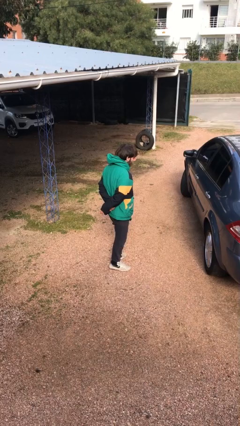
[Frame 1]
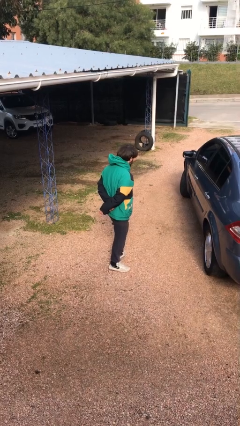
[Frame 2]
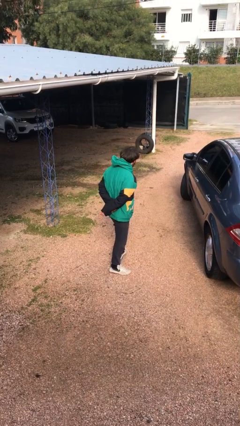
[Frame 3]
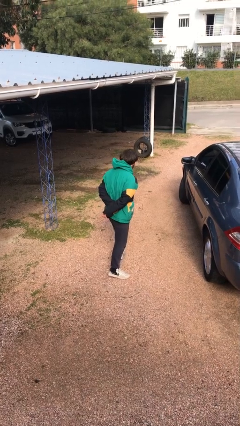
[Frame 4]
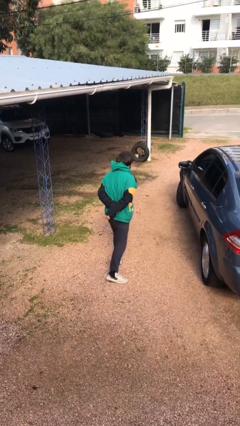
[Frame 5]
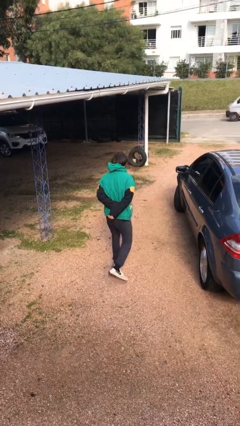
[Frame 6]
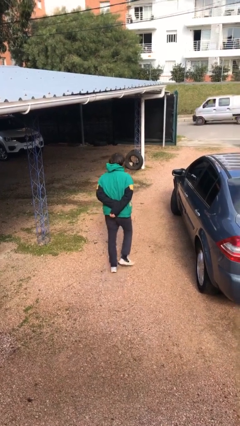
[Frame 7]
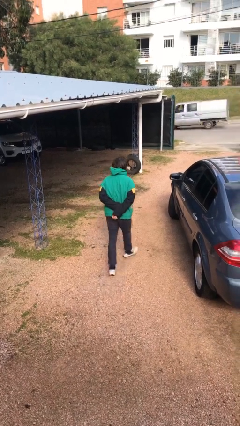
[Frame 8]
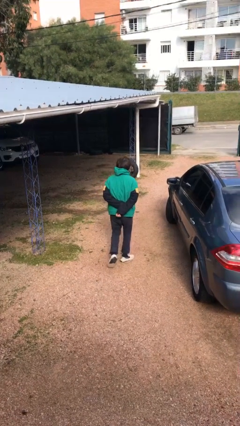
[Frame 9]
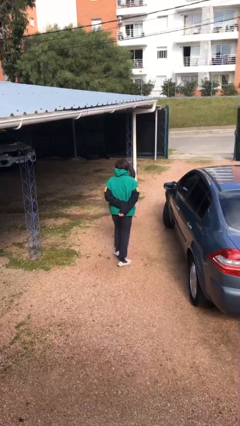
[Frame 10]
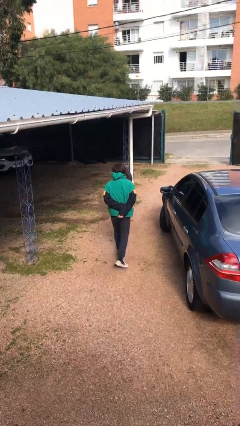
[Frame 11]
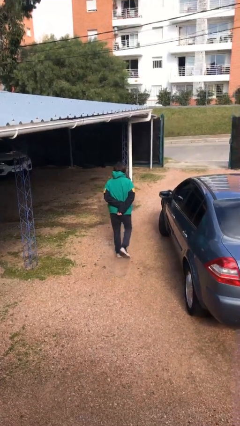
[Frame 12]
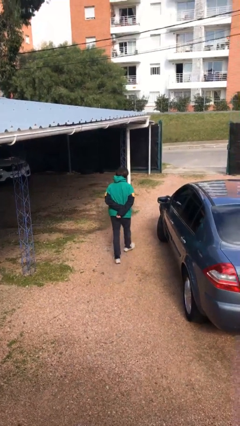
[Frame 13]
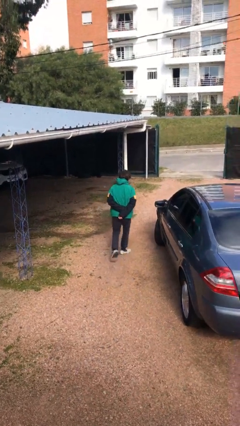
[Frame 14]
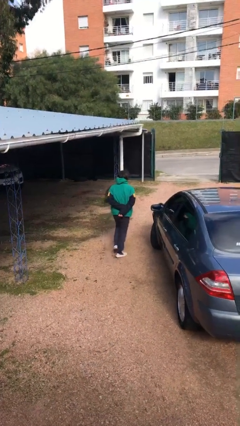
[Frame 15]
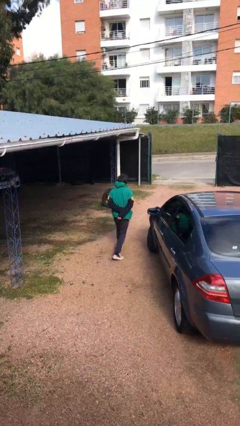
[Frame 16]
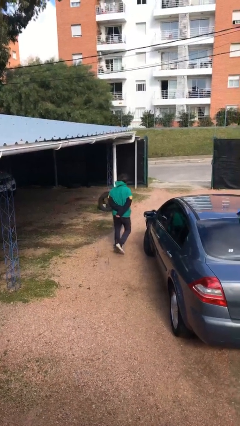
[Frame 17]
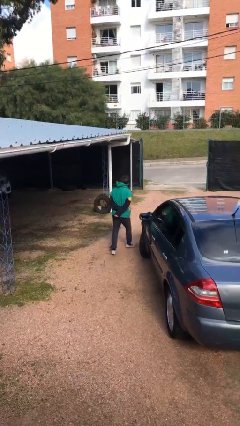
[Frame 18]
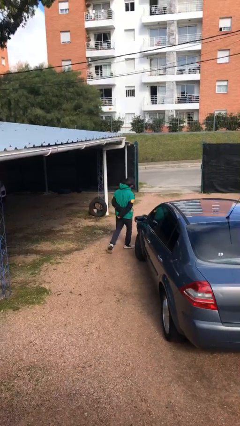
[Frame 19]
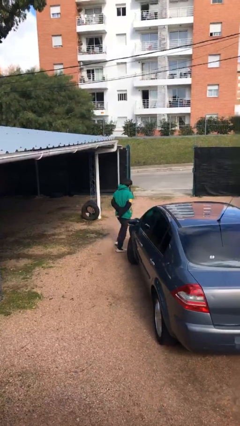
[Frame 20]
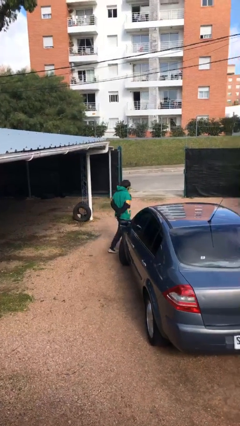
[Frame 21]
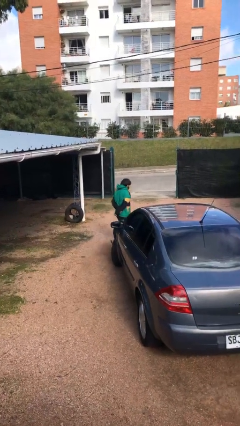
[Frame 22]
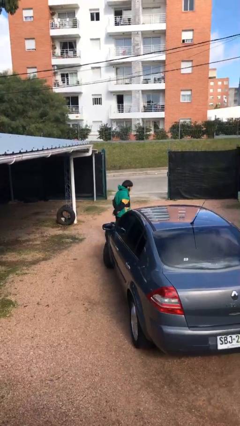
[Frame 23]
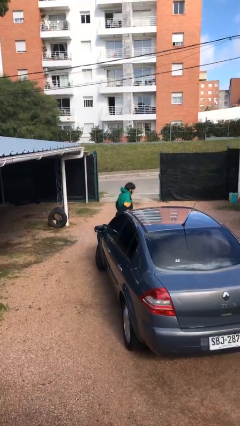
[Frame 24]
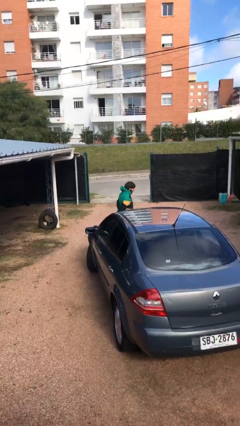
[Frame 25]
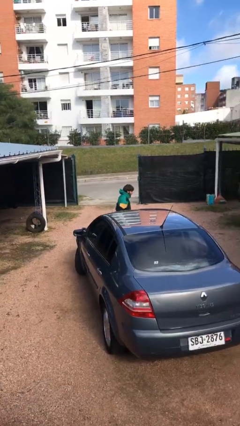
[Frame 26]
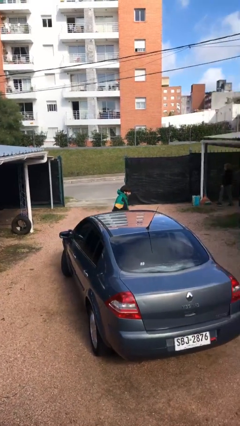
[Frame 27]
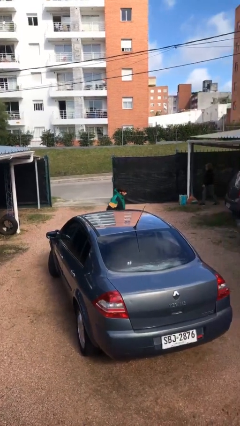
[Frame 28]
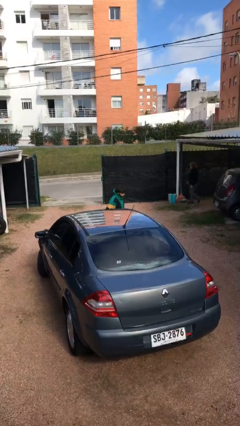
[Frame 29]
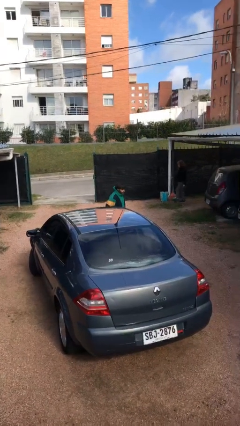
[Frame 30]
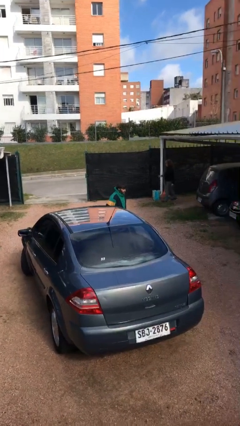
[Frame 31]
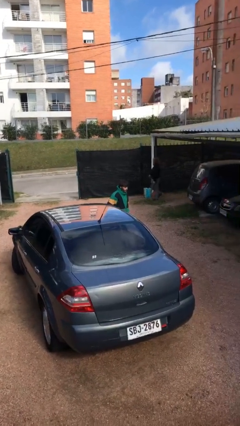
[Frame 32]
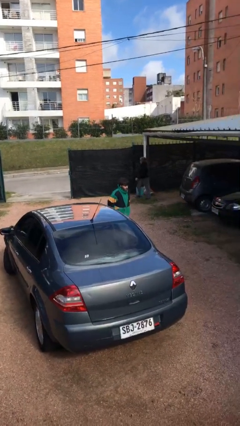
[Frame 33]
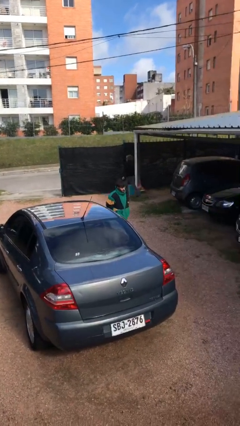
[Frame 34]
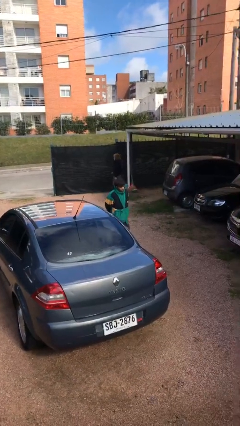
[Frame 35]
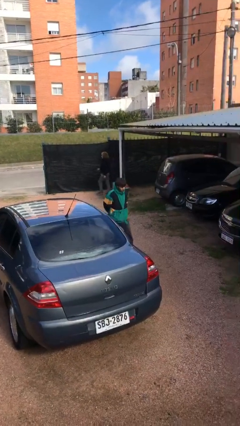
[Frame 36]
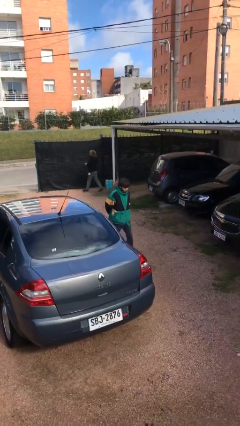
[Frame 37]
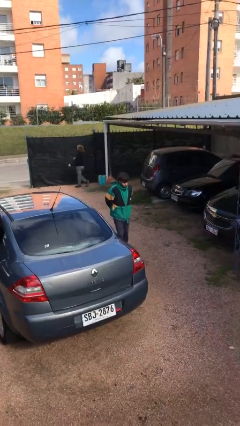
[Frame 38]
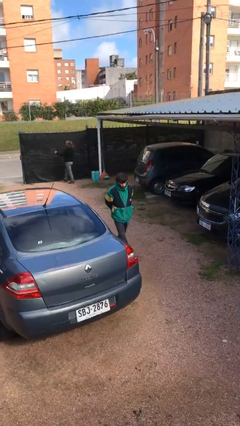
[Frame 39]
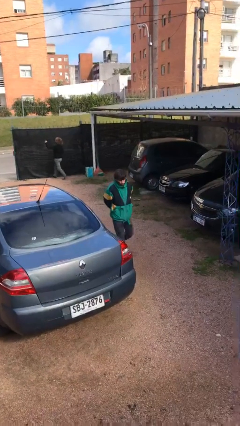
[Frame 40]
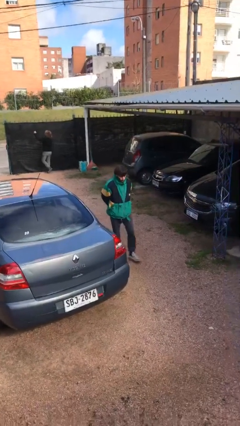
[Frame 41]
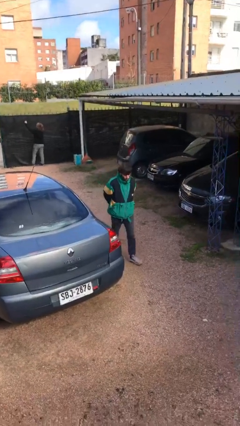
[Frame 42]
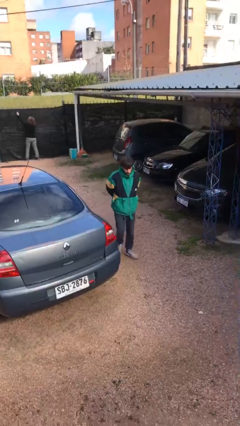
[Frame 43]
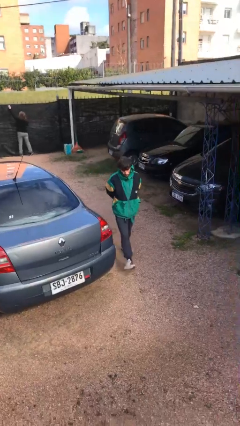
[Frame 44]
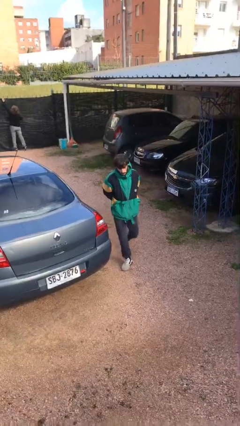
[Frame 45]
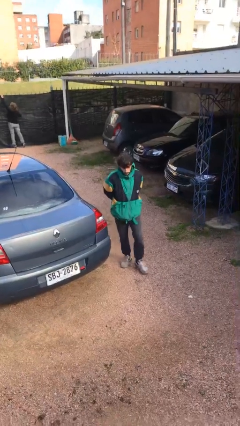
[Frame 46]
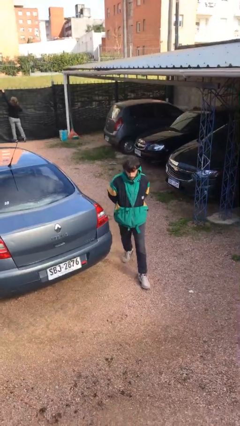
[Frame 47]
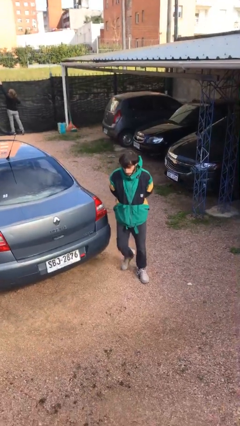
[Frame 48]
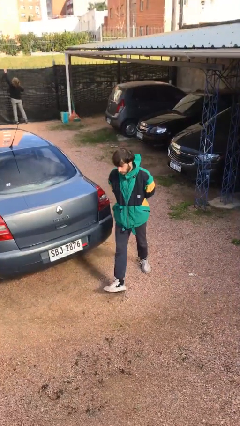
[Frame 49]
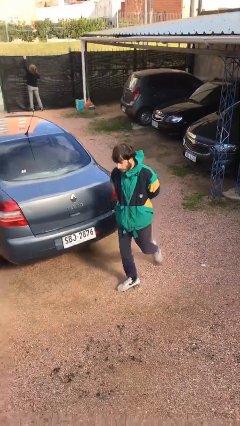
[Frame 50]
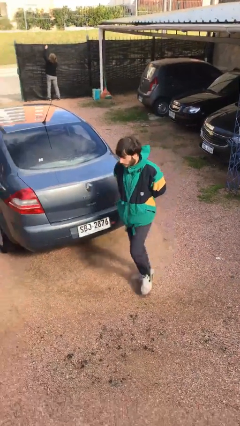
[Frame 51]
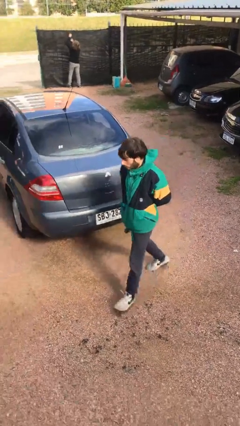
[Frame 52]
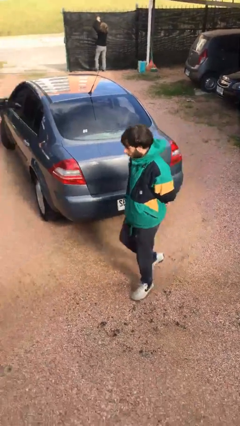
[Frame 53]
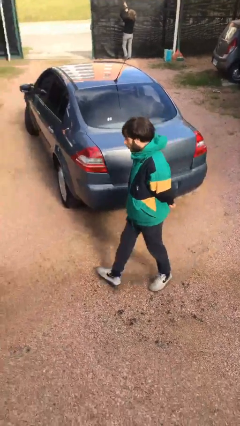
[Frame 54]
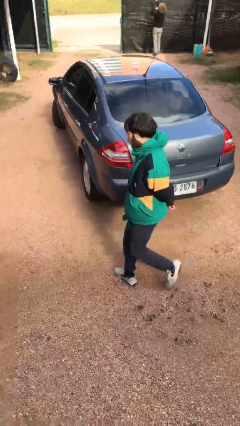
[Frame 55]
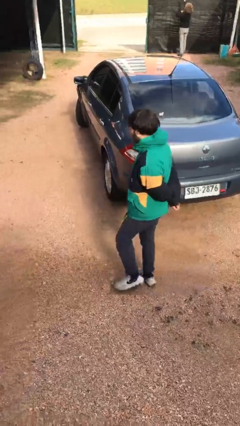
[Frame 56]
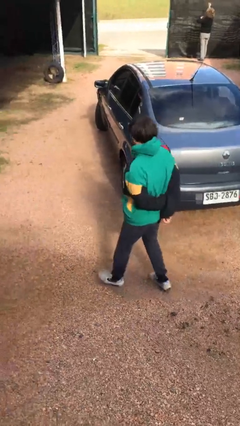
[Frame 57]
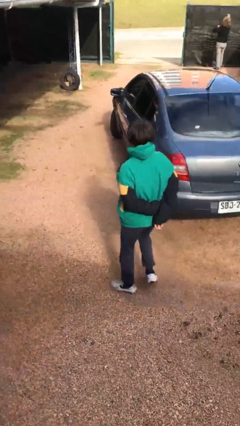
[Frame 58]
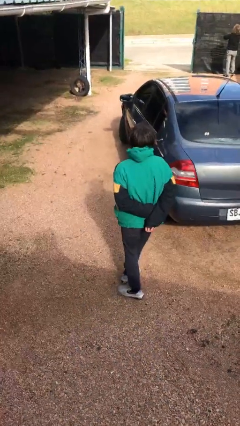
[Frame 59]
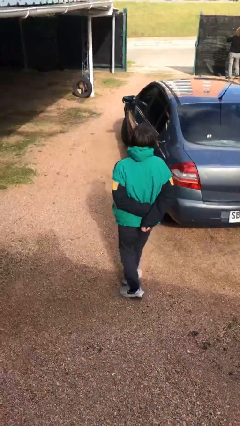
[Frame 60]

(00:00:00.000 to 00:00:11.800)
person walks around car

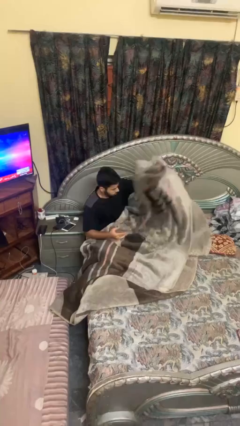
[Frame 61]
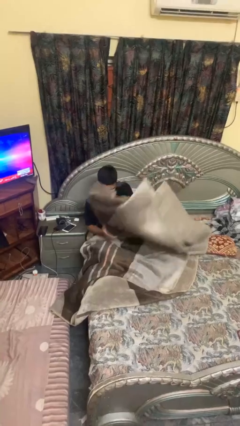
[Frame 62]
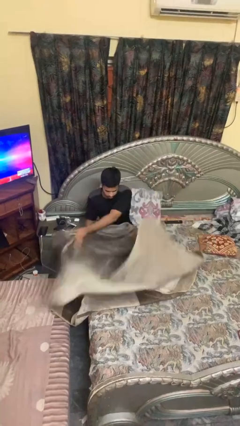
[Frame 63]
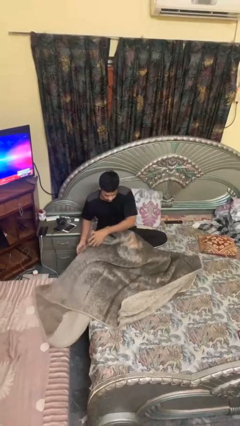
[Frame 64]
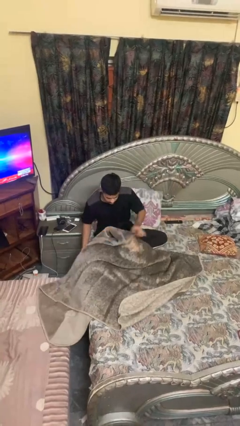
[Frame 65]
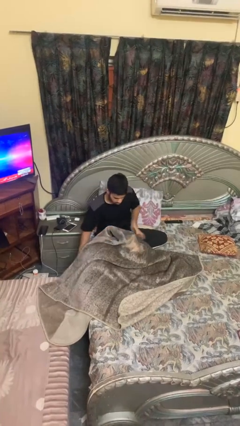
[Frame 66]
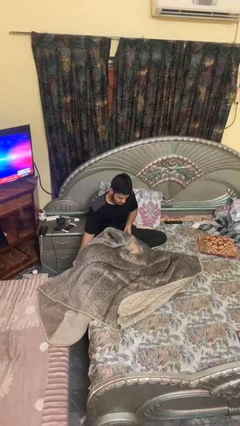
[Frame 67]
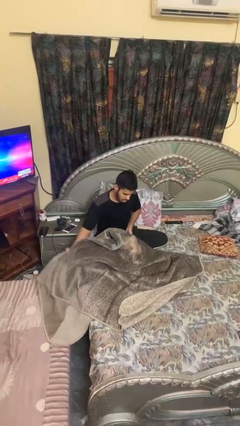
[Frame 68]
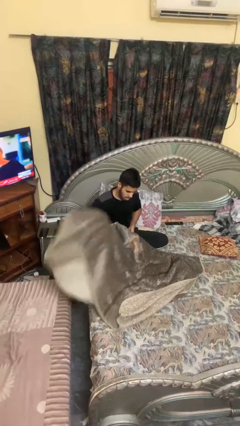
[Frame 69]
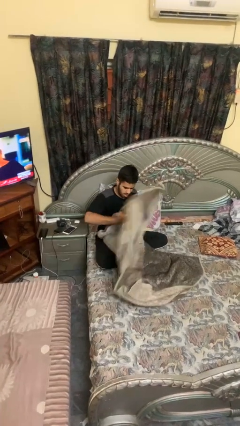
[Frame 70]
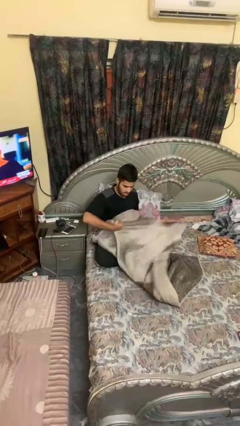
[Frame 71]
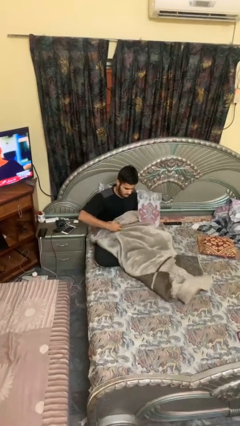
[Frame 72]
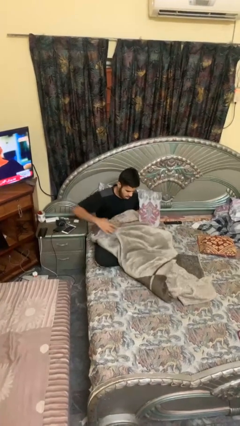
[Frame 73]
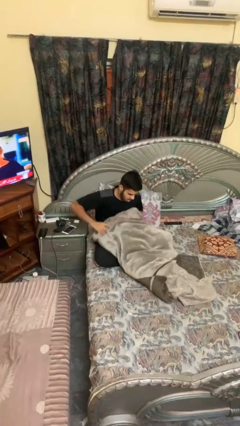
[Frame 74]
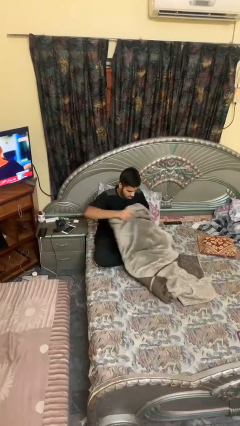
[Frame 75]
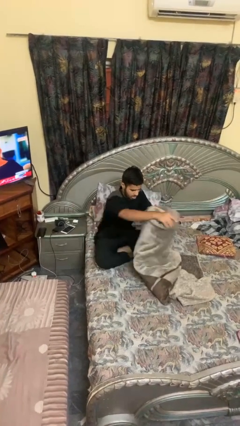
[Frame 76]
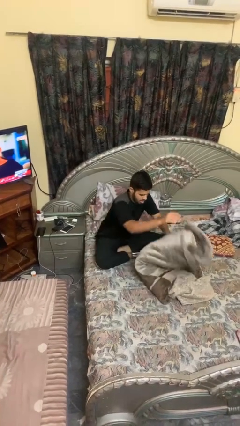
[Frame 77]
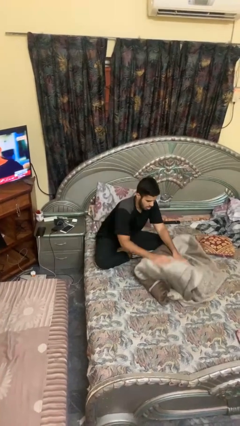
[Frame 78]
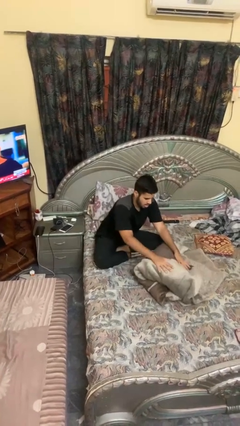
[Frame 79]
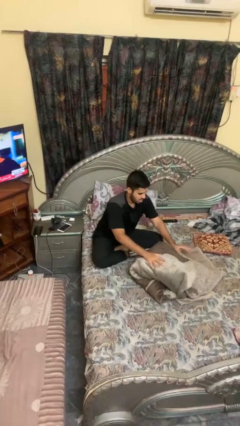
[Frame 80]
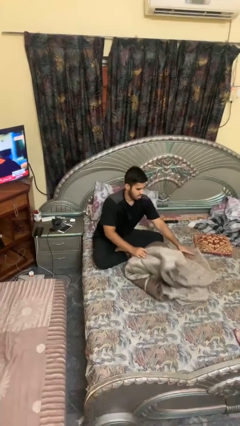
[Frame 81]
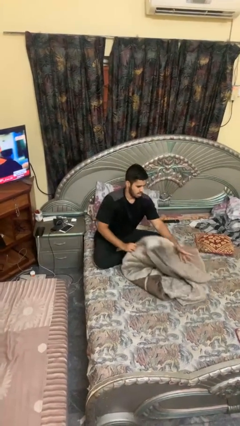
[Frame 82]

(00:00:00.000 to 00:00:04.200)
person folds blanket

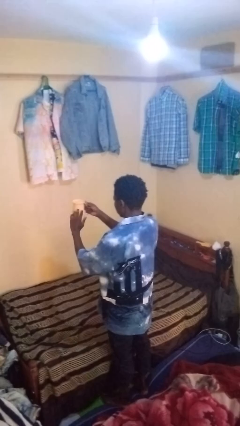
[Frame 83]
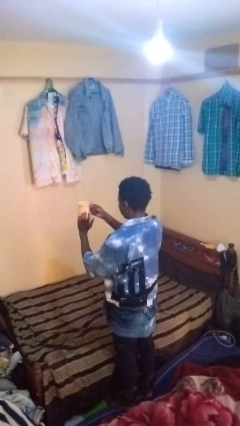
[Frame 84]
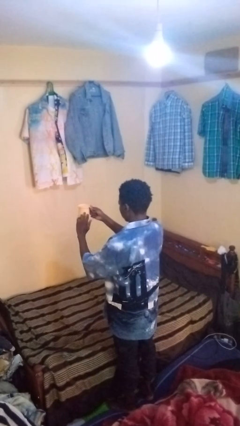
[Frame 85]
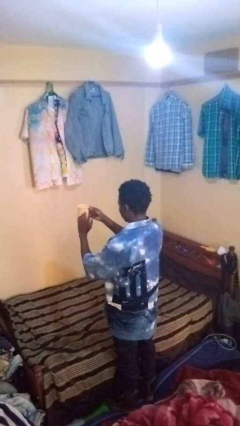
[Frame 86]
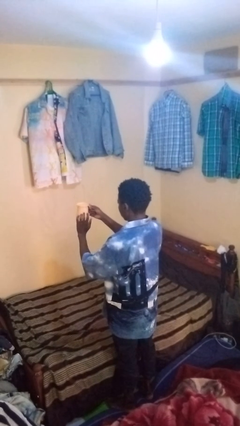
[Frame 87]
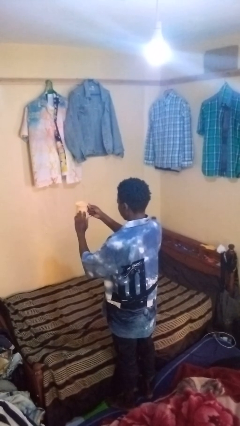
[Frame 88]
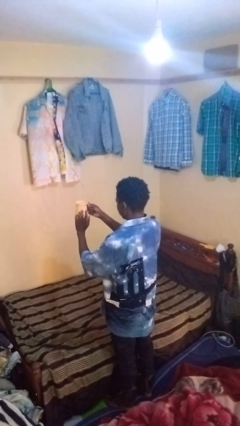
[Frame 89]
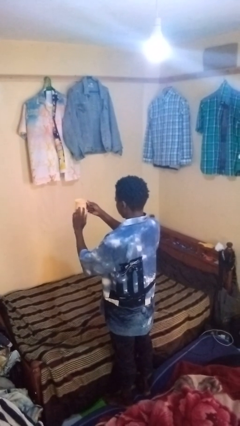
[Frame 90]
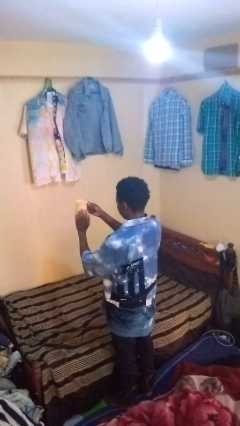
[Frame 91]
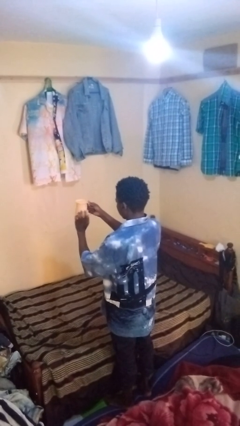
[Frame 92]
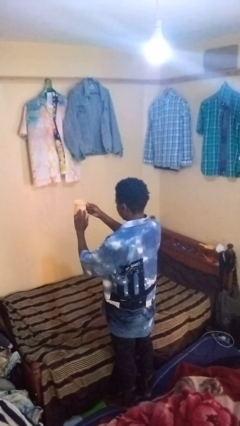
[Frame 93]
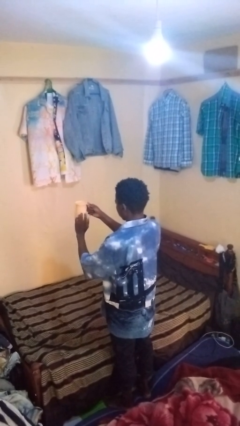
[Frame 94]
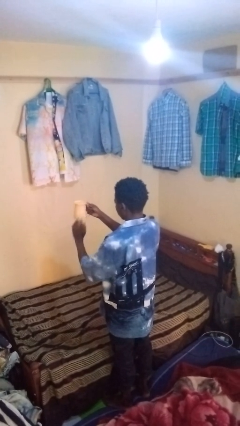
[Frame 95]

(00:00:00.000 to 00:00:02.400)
person taps object with finger
